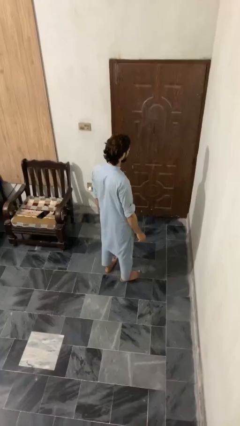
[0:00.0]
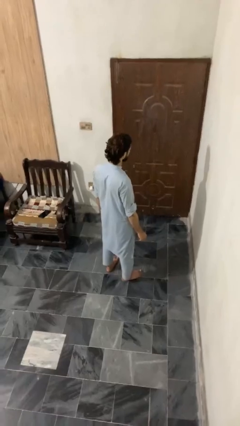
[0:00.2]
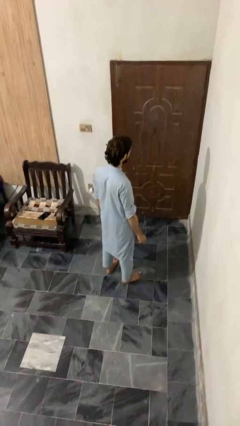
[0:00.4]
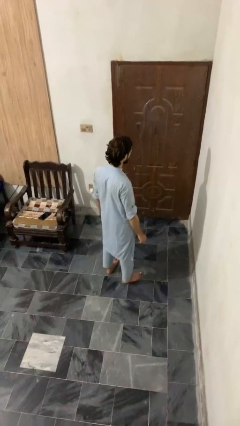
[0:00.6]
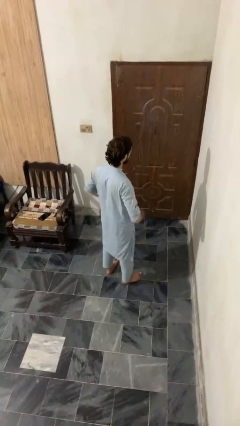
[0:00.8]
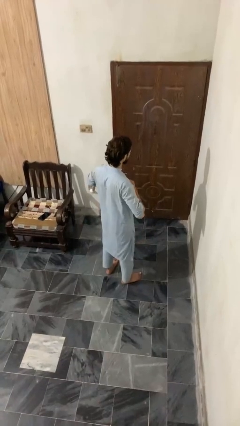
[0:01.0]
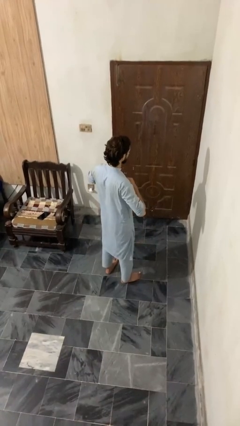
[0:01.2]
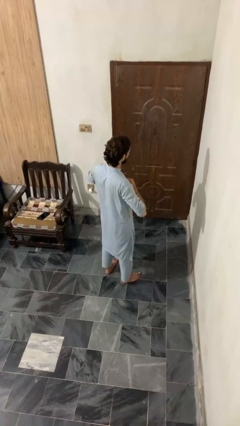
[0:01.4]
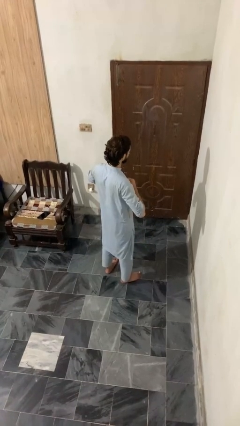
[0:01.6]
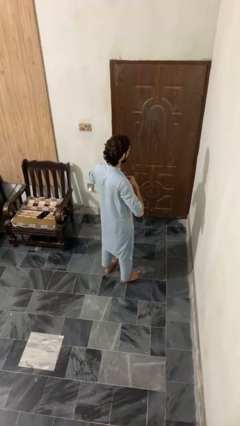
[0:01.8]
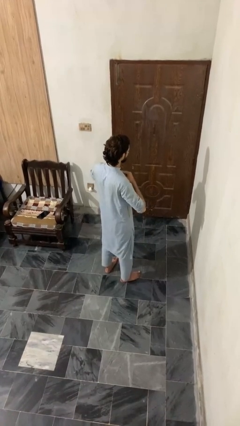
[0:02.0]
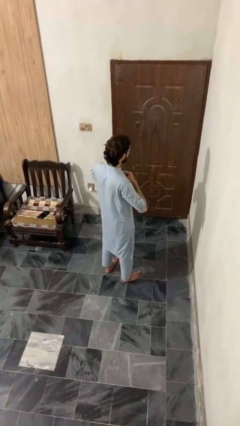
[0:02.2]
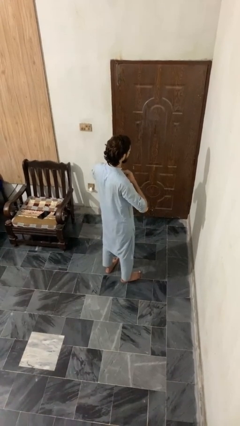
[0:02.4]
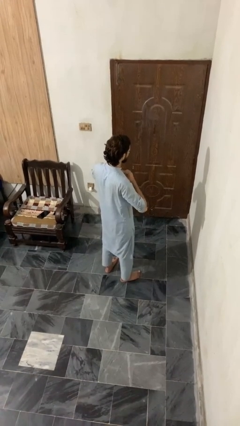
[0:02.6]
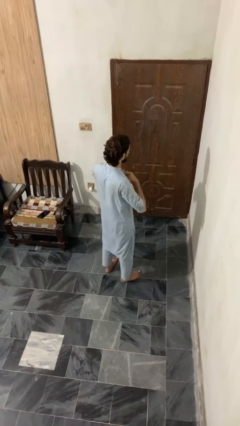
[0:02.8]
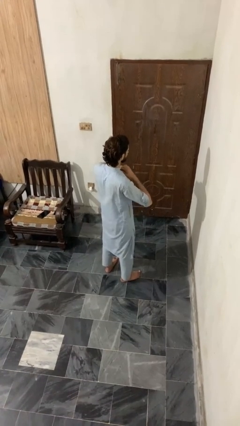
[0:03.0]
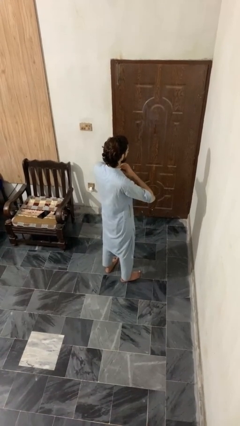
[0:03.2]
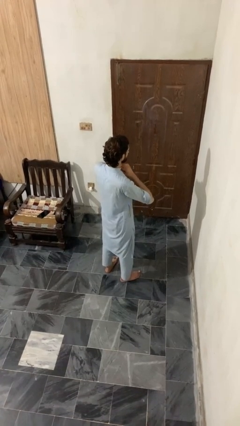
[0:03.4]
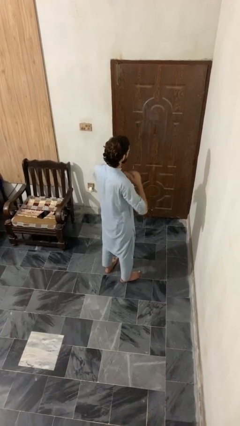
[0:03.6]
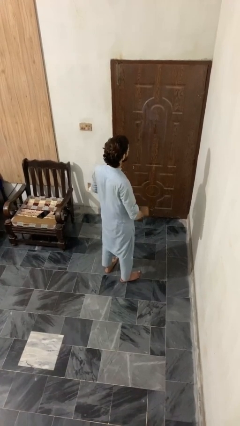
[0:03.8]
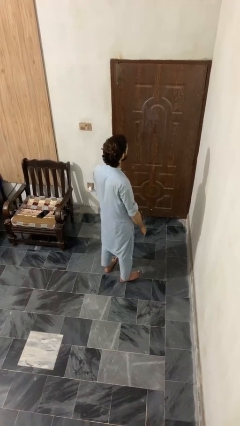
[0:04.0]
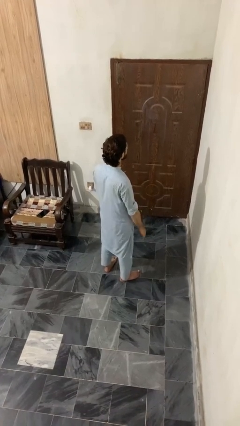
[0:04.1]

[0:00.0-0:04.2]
person buttons shirt

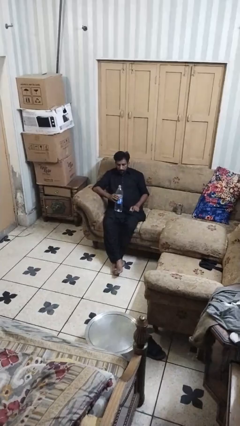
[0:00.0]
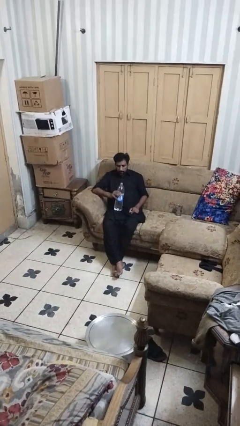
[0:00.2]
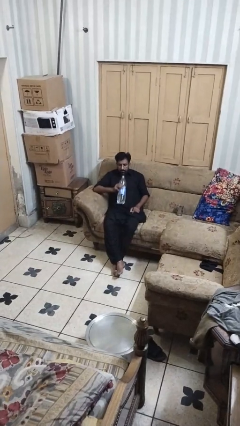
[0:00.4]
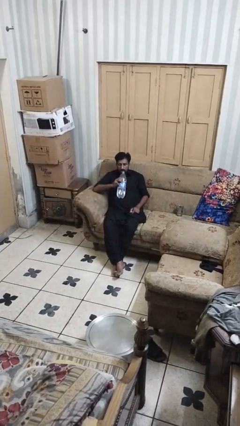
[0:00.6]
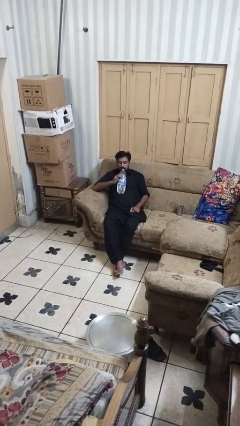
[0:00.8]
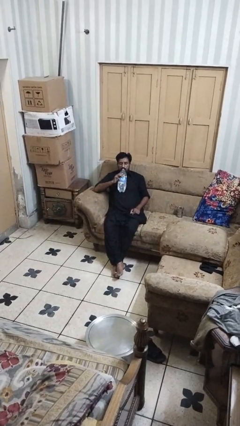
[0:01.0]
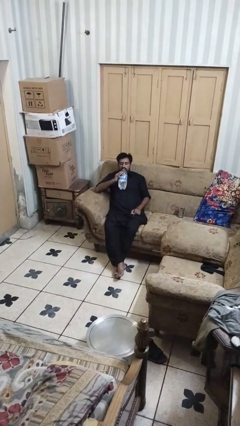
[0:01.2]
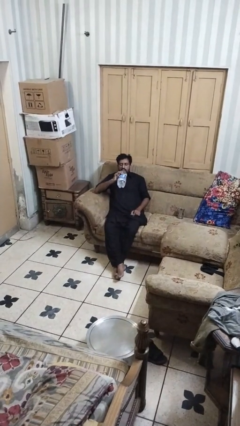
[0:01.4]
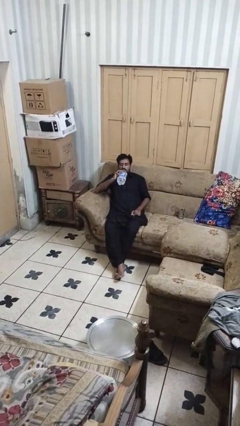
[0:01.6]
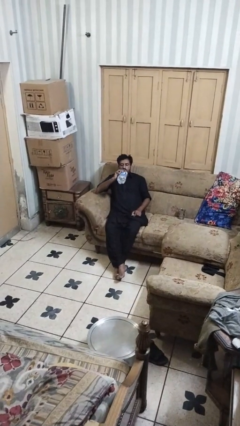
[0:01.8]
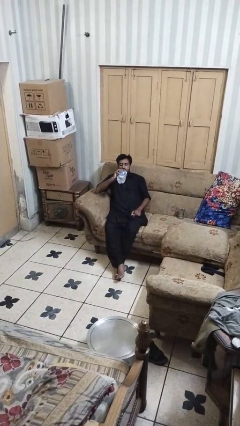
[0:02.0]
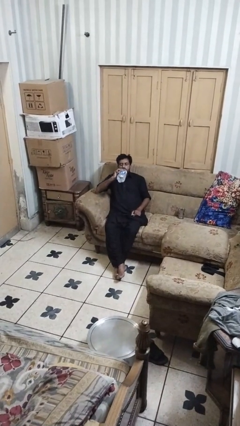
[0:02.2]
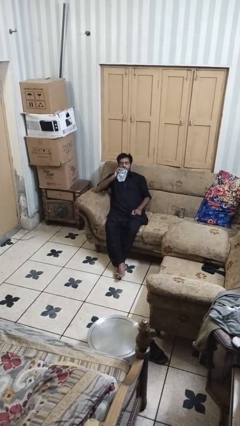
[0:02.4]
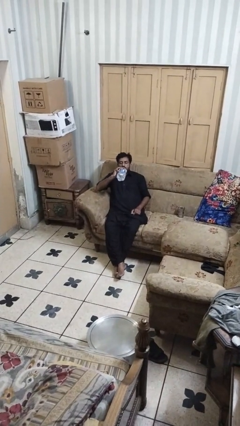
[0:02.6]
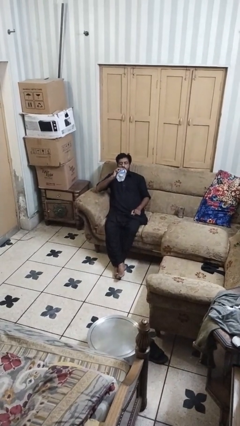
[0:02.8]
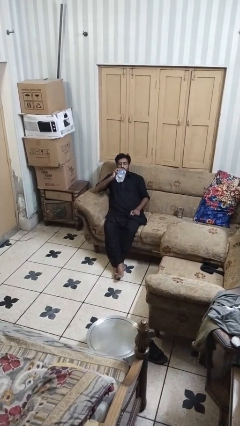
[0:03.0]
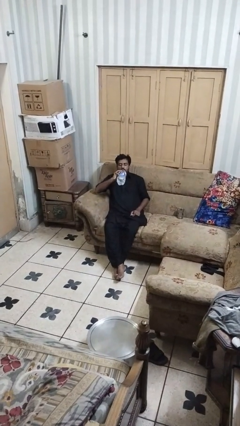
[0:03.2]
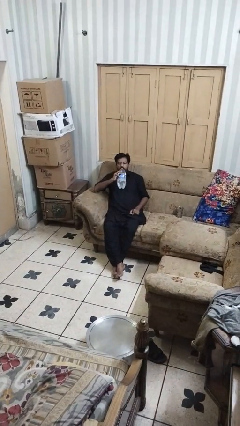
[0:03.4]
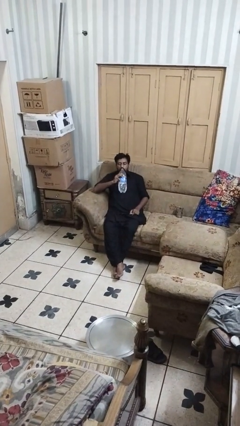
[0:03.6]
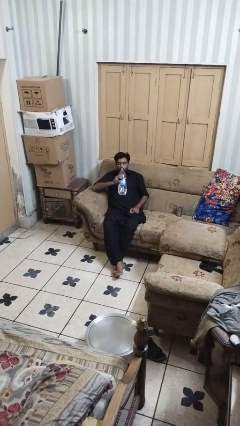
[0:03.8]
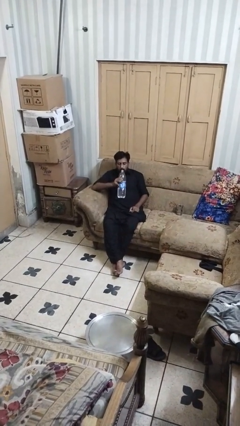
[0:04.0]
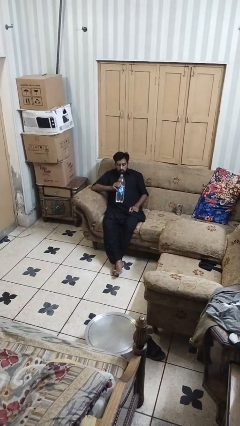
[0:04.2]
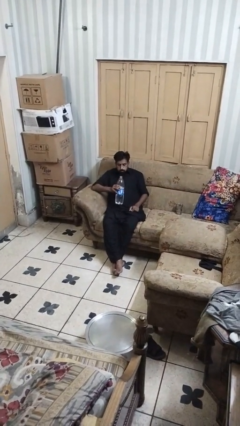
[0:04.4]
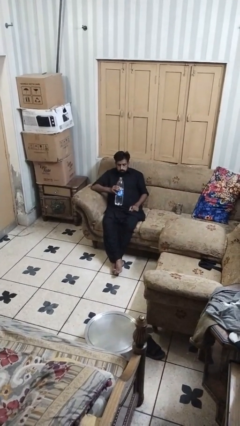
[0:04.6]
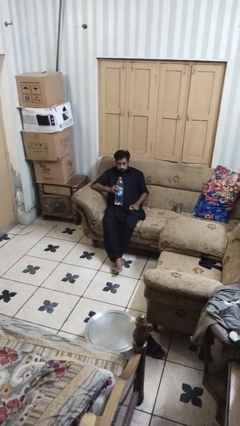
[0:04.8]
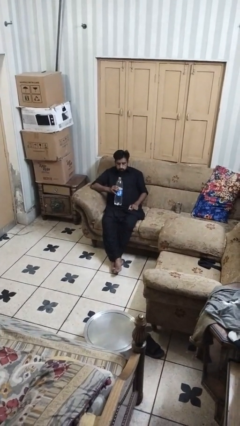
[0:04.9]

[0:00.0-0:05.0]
person drinks from bottle

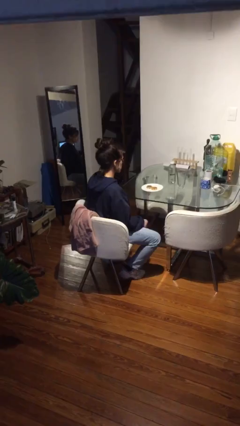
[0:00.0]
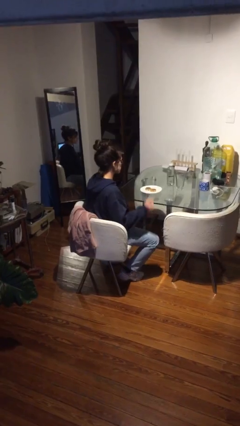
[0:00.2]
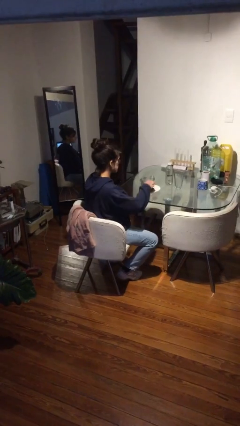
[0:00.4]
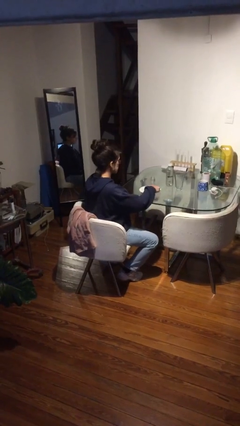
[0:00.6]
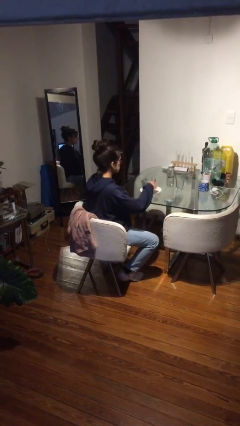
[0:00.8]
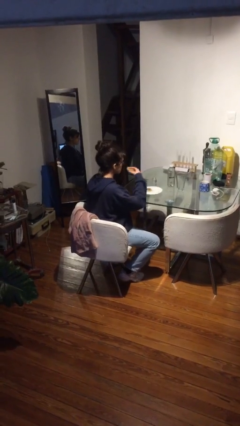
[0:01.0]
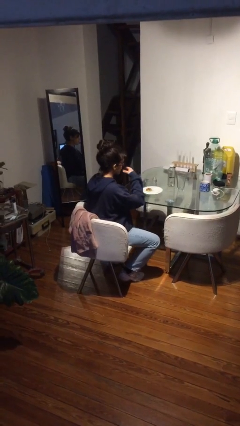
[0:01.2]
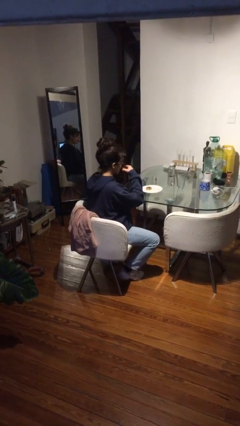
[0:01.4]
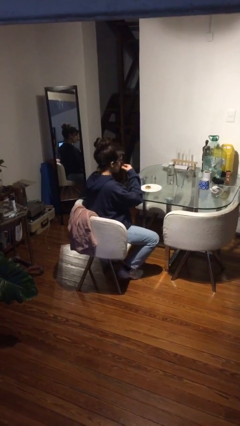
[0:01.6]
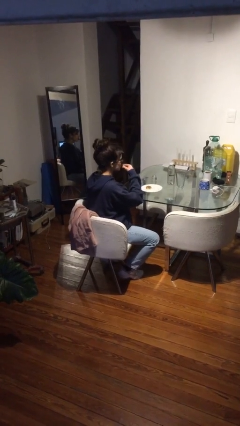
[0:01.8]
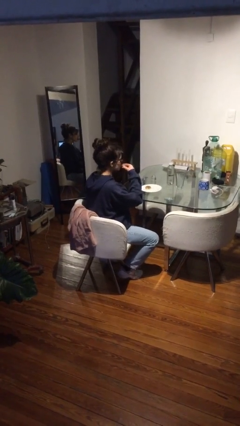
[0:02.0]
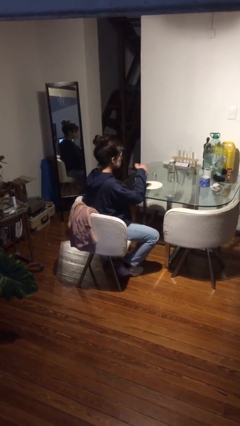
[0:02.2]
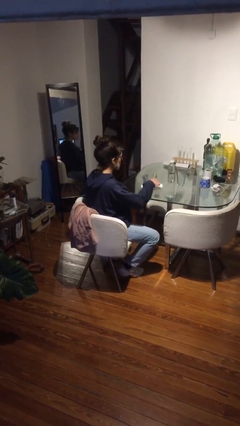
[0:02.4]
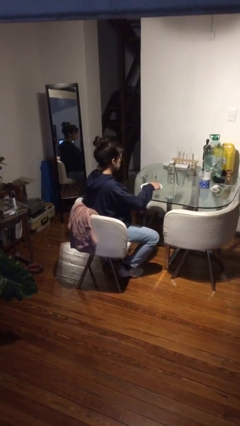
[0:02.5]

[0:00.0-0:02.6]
person eats with hands

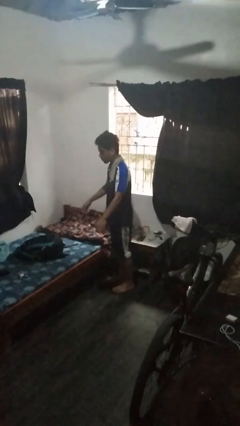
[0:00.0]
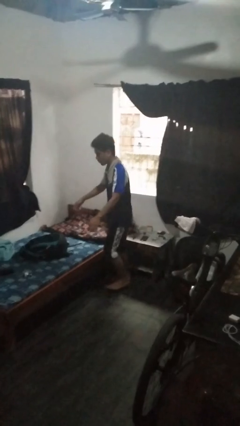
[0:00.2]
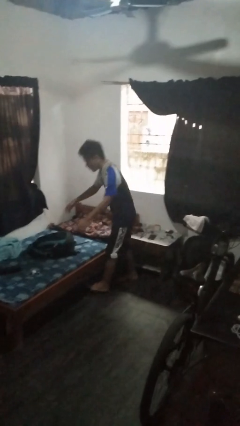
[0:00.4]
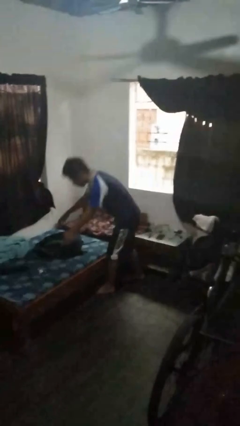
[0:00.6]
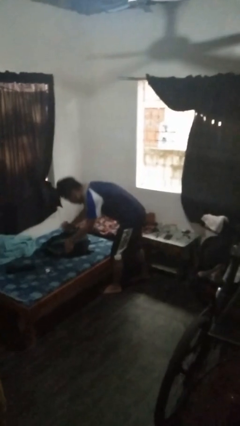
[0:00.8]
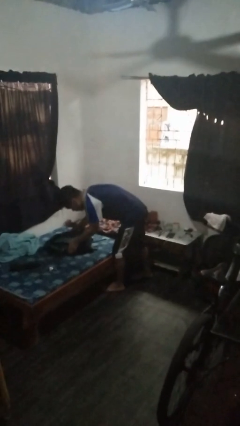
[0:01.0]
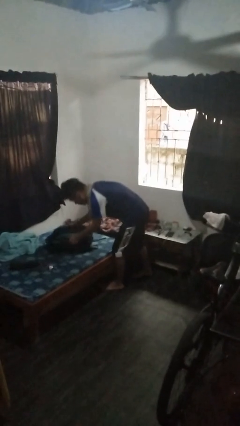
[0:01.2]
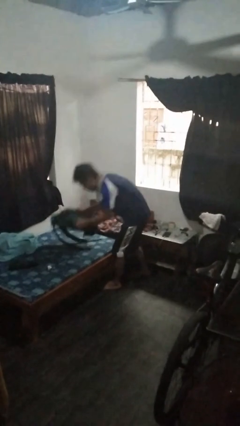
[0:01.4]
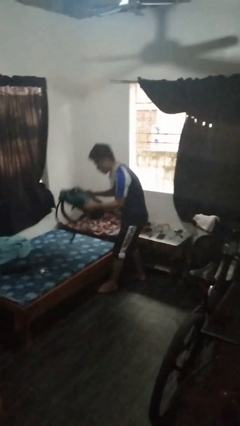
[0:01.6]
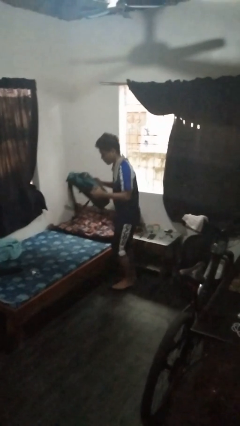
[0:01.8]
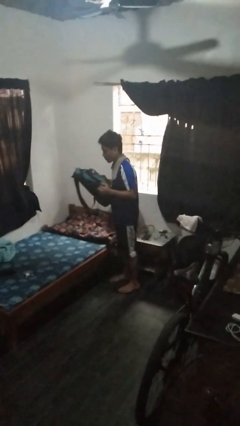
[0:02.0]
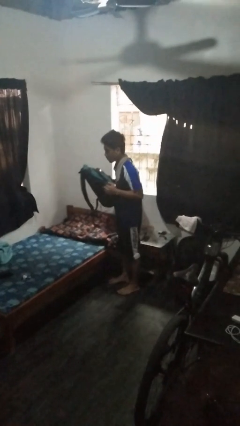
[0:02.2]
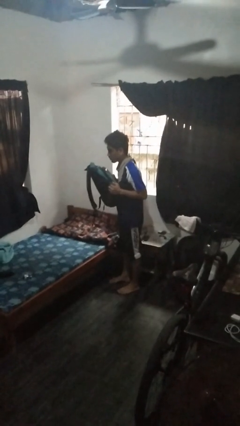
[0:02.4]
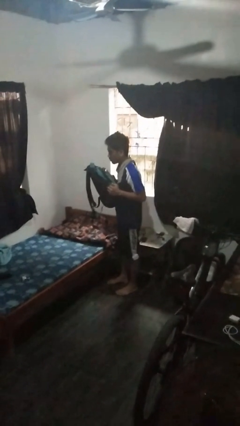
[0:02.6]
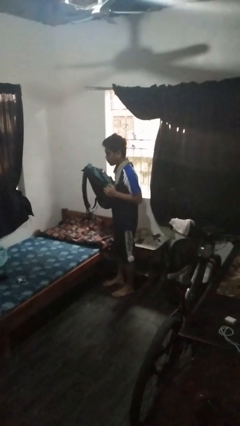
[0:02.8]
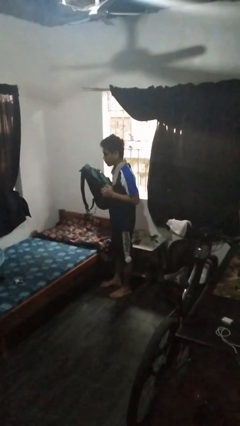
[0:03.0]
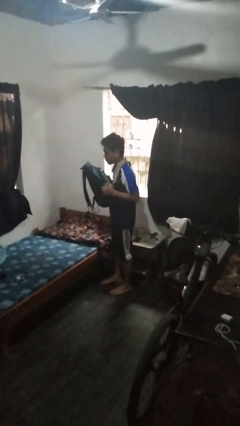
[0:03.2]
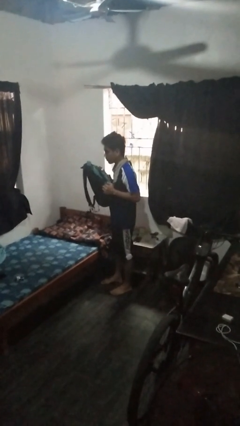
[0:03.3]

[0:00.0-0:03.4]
person picks up object from bed

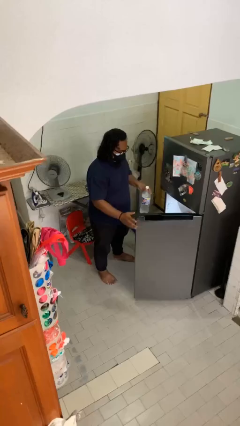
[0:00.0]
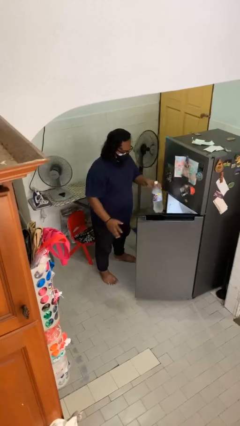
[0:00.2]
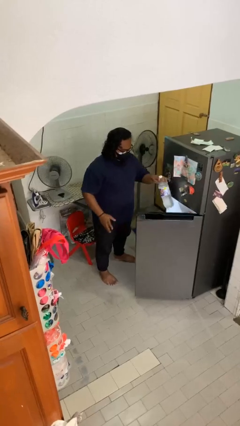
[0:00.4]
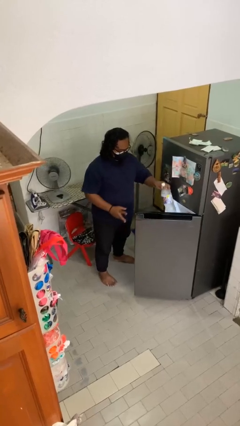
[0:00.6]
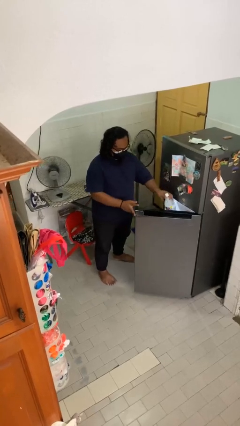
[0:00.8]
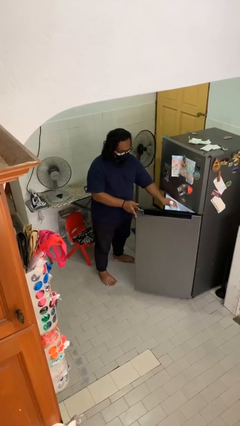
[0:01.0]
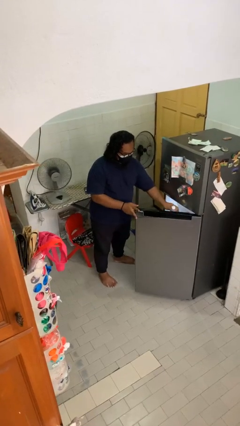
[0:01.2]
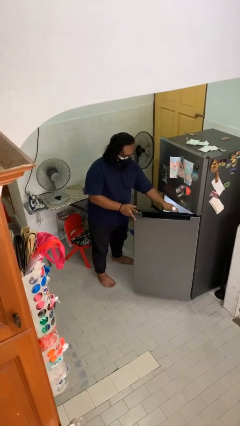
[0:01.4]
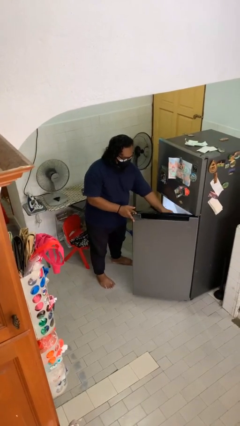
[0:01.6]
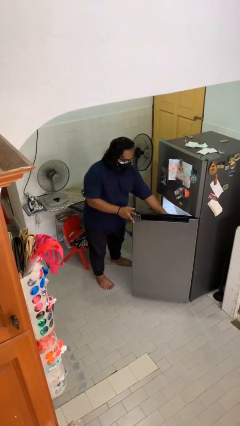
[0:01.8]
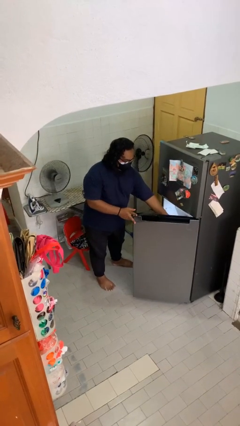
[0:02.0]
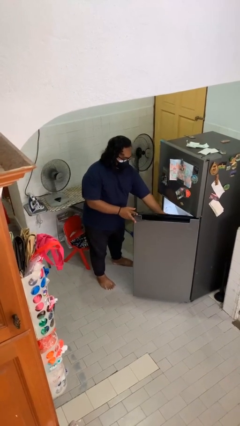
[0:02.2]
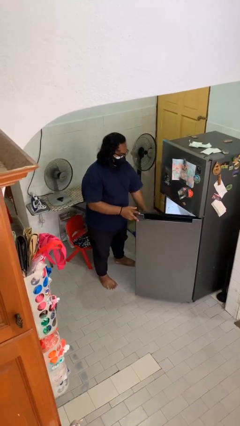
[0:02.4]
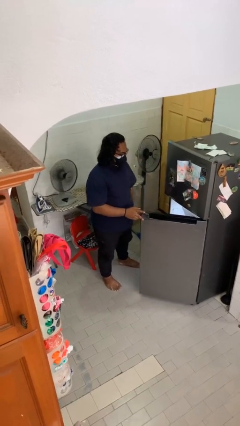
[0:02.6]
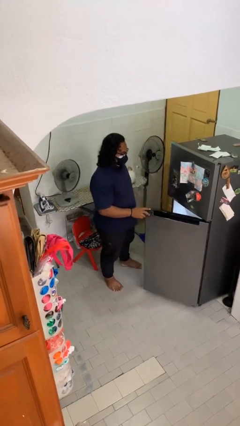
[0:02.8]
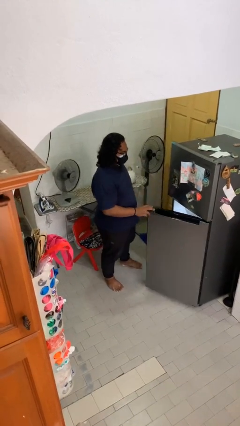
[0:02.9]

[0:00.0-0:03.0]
person puts object into refrigerator
